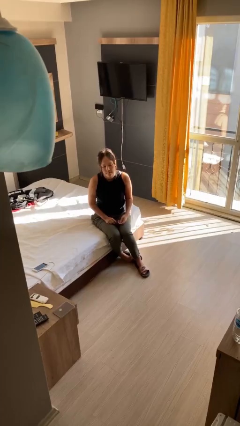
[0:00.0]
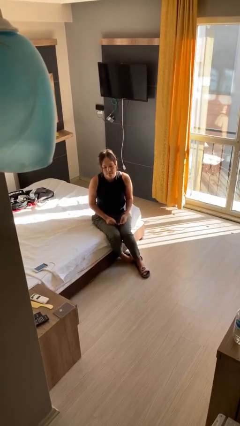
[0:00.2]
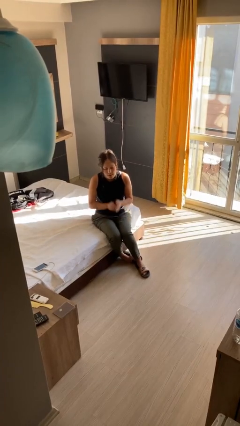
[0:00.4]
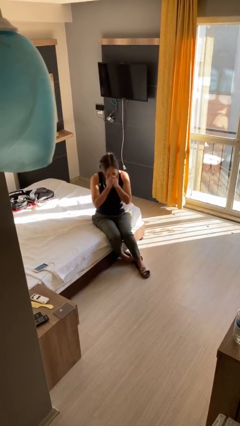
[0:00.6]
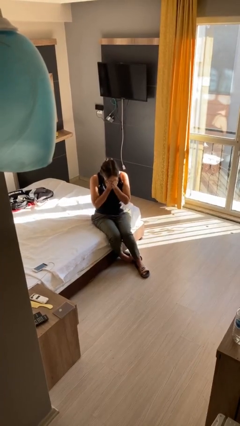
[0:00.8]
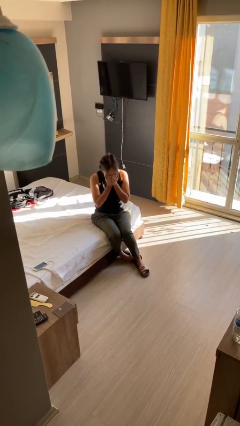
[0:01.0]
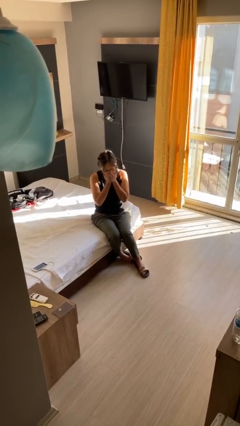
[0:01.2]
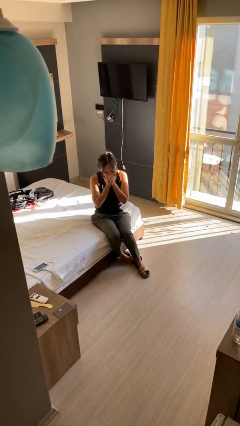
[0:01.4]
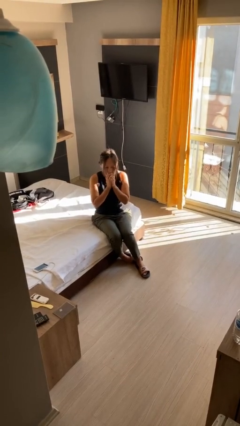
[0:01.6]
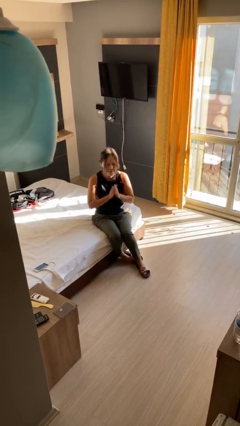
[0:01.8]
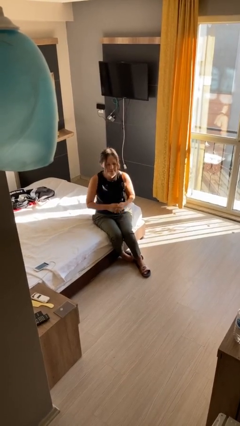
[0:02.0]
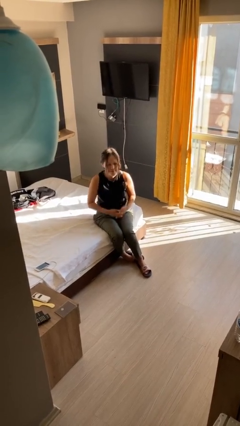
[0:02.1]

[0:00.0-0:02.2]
person sneezes into hand

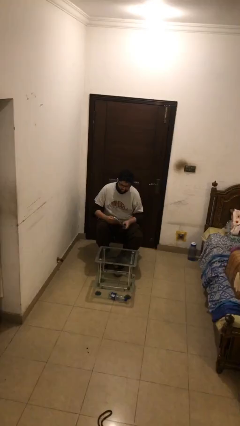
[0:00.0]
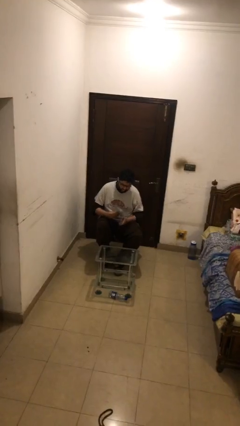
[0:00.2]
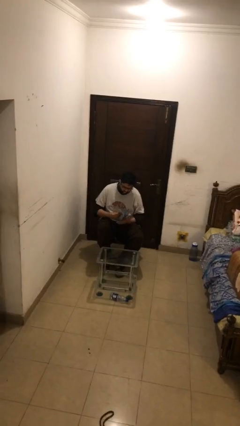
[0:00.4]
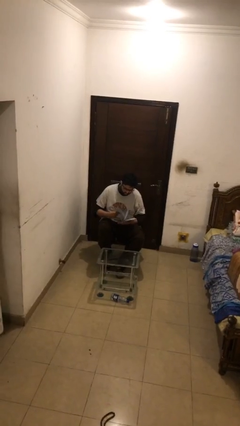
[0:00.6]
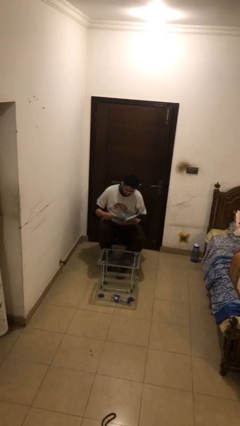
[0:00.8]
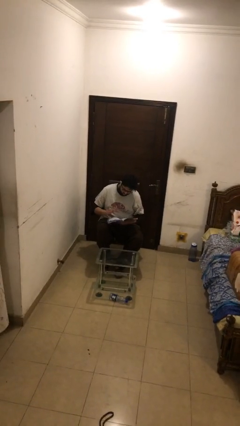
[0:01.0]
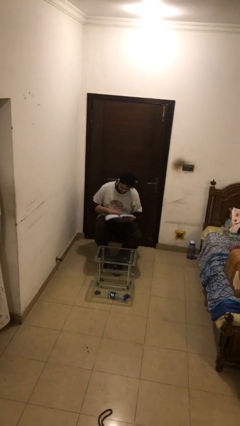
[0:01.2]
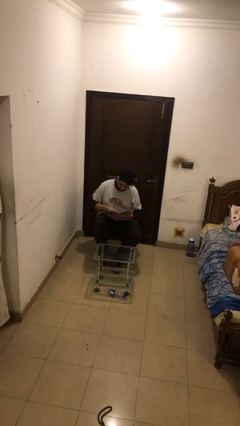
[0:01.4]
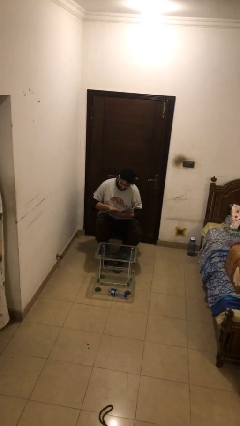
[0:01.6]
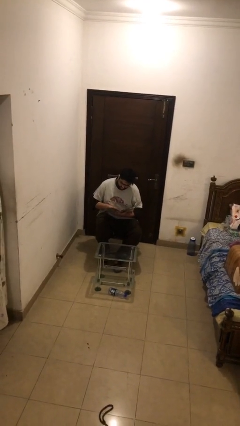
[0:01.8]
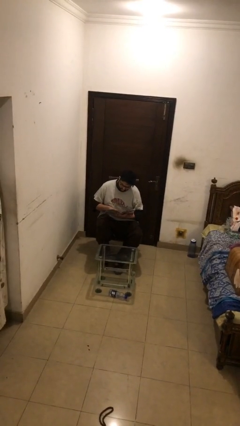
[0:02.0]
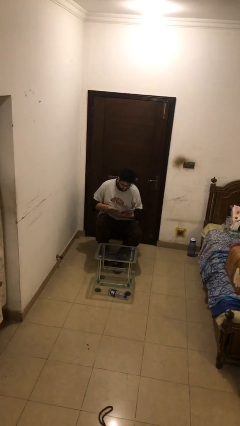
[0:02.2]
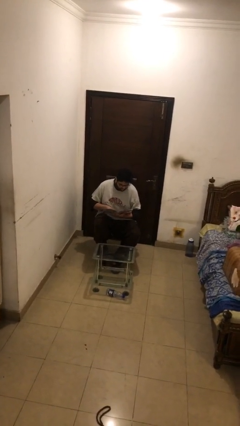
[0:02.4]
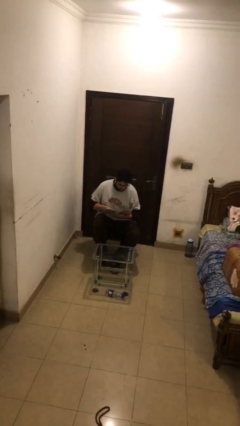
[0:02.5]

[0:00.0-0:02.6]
person reads document

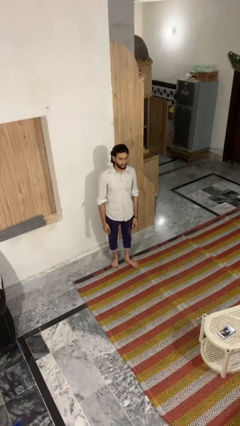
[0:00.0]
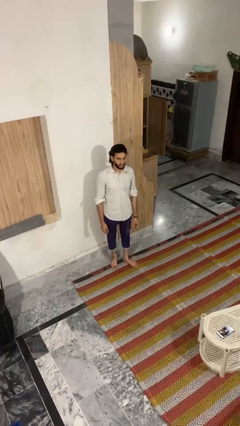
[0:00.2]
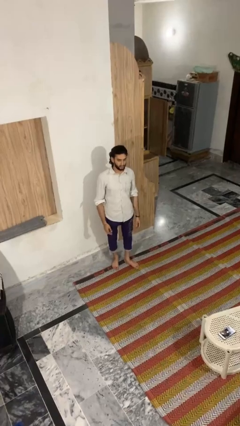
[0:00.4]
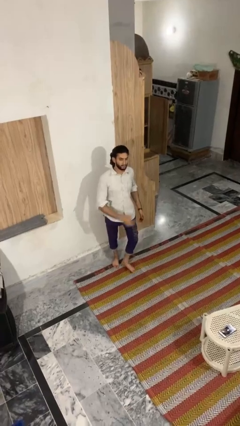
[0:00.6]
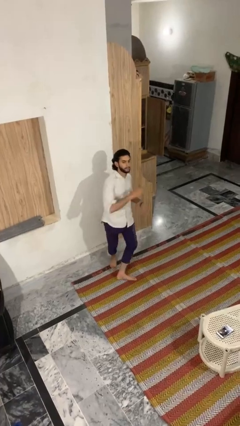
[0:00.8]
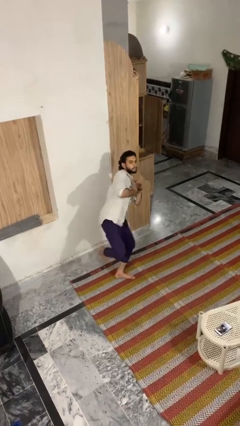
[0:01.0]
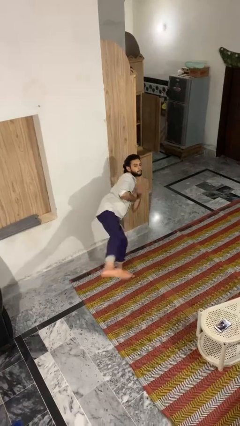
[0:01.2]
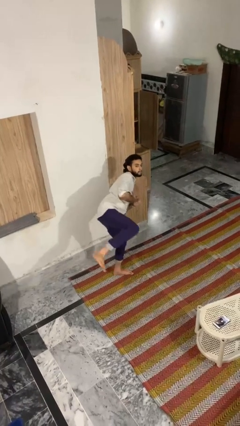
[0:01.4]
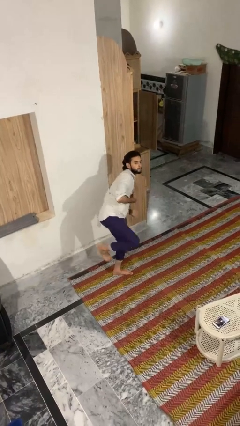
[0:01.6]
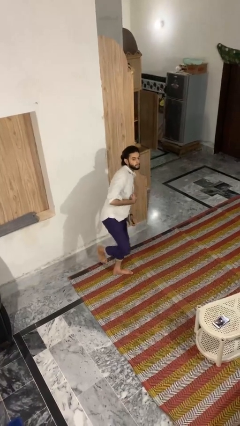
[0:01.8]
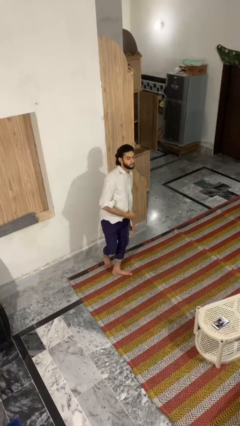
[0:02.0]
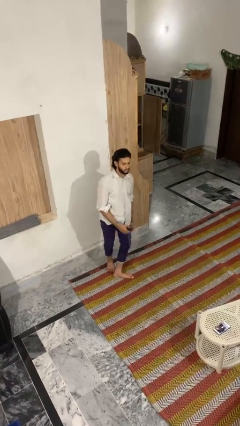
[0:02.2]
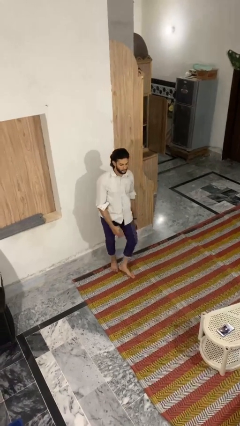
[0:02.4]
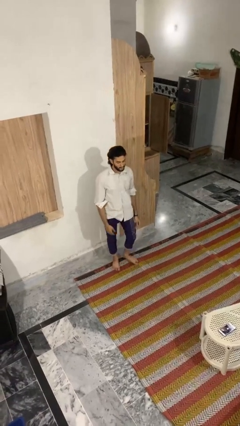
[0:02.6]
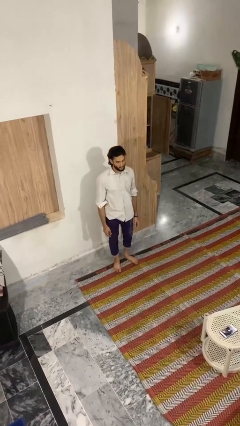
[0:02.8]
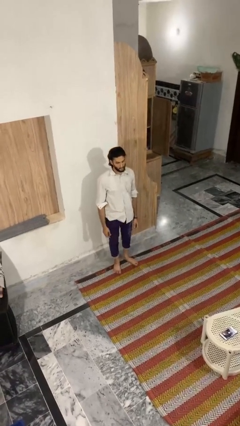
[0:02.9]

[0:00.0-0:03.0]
person karate kicks

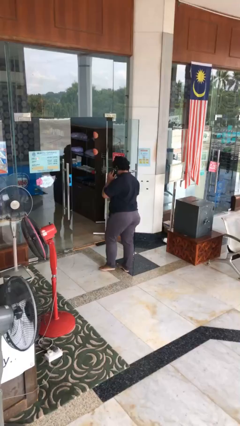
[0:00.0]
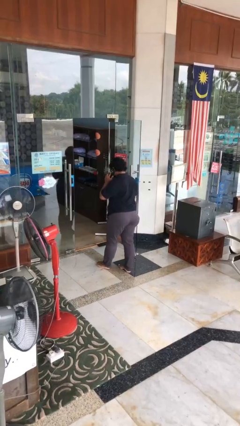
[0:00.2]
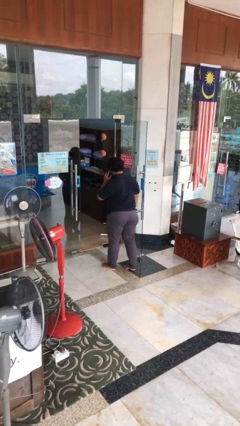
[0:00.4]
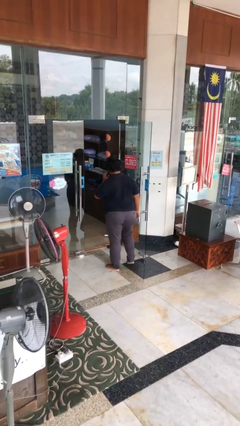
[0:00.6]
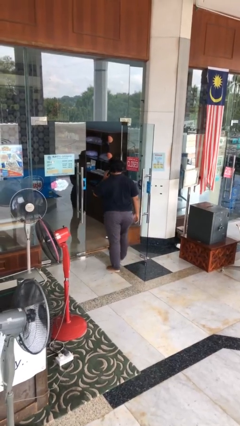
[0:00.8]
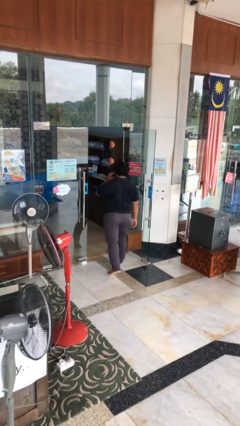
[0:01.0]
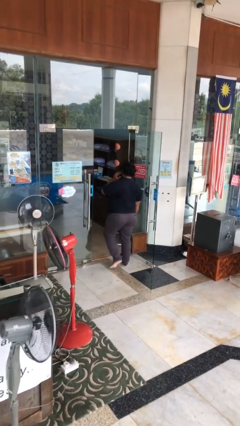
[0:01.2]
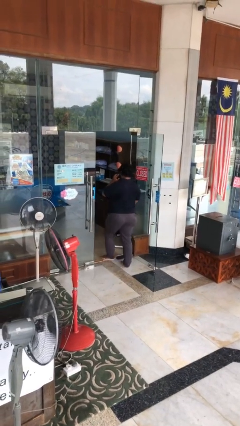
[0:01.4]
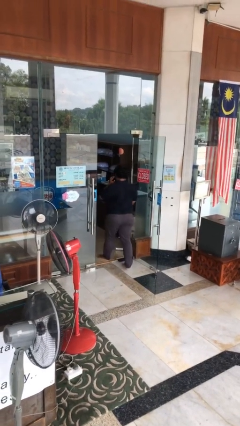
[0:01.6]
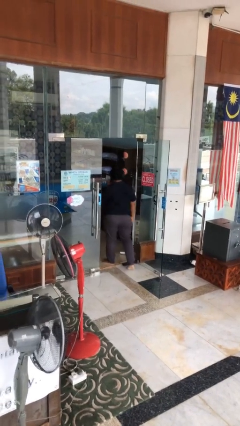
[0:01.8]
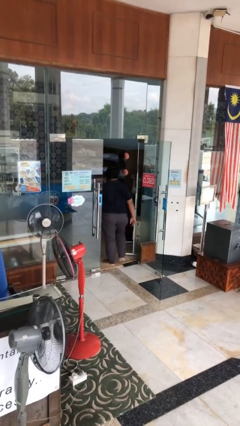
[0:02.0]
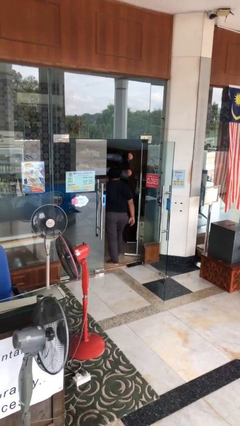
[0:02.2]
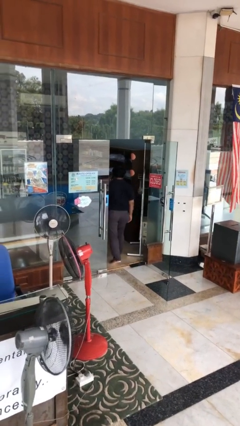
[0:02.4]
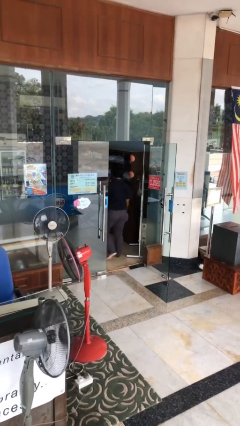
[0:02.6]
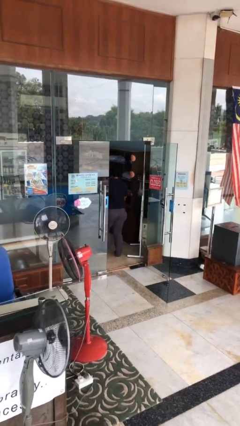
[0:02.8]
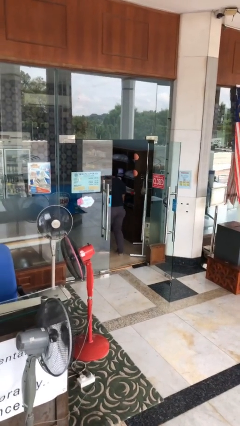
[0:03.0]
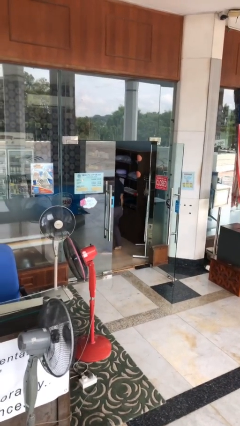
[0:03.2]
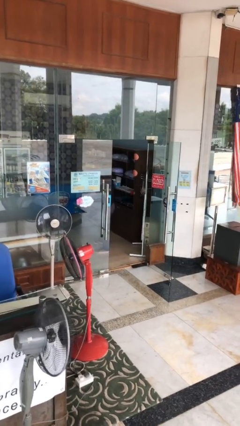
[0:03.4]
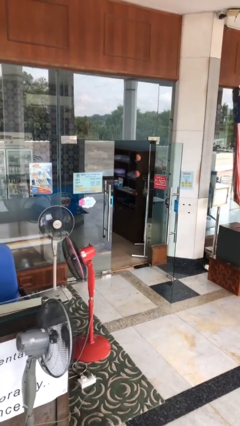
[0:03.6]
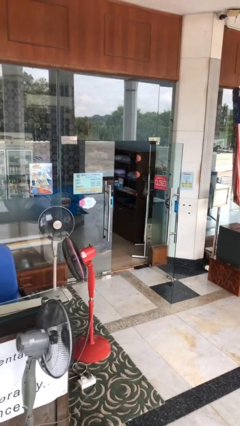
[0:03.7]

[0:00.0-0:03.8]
person exits scene through structure

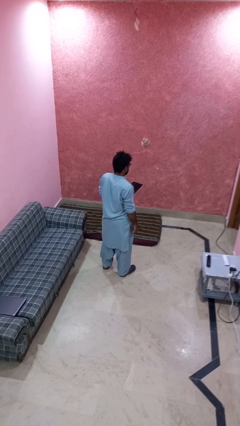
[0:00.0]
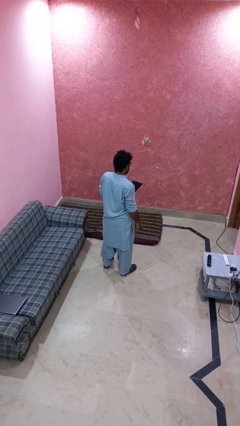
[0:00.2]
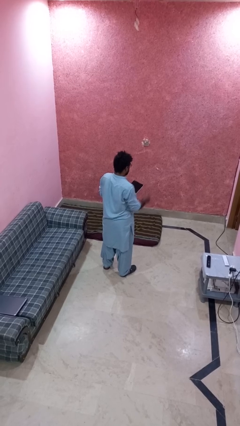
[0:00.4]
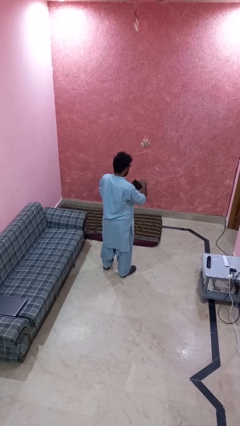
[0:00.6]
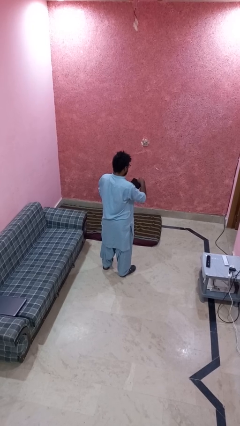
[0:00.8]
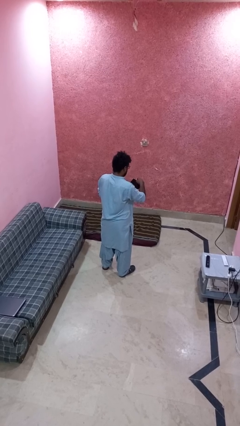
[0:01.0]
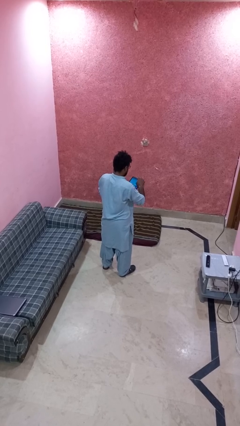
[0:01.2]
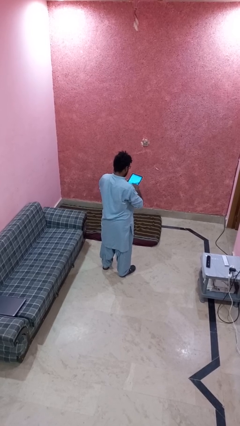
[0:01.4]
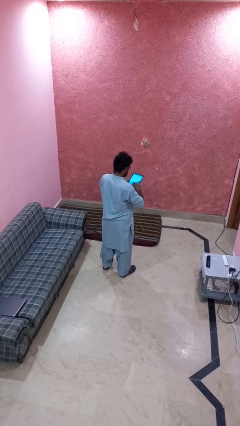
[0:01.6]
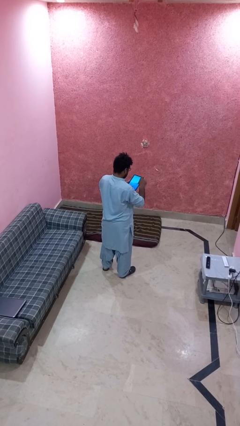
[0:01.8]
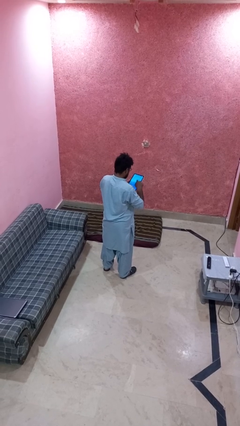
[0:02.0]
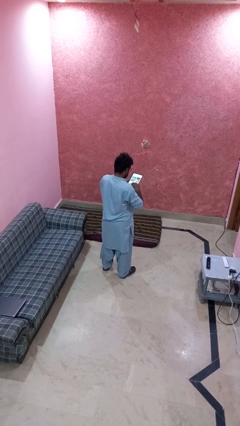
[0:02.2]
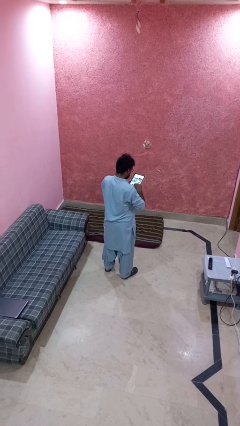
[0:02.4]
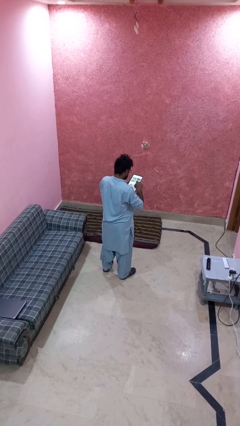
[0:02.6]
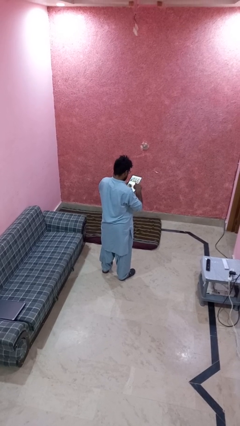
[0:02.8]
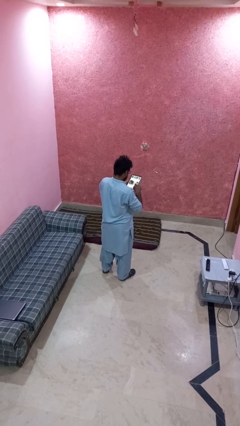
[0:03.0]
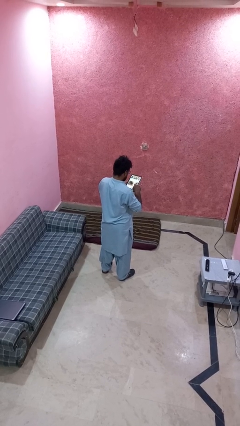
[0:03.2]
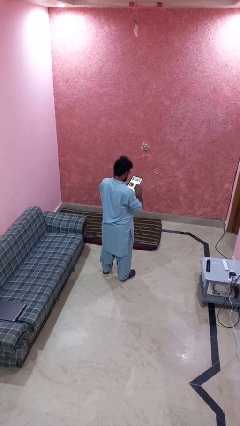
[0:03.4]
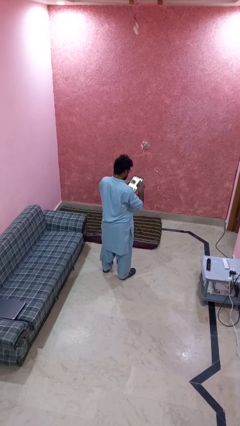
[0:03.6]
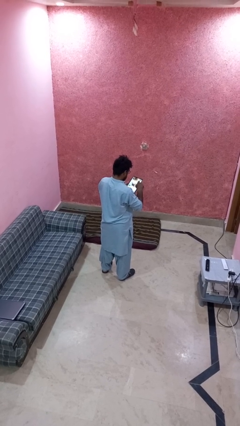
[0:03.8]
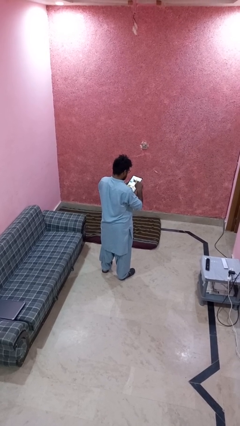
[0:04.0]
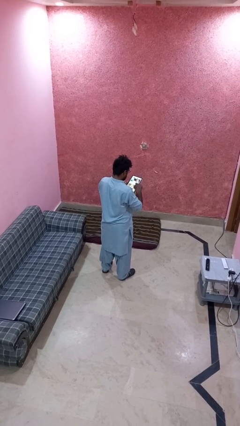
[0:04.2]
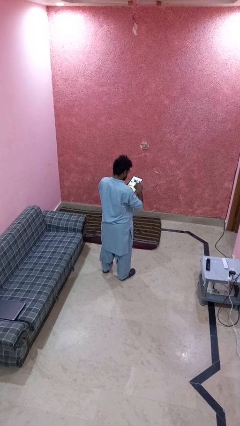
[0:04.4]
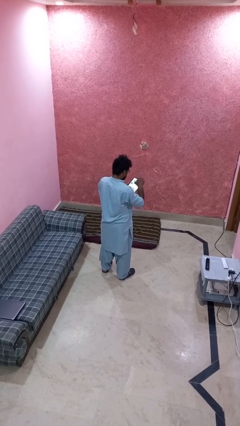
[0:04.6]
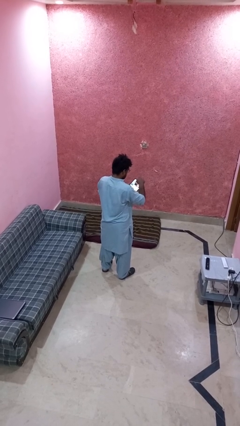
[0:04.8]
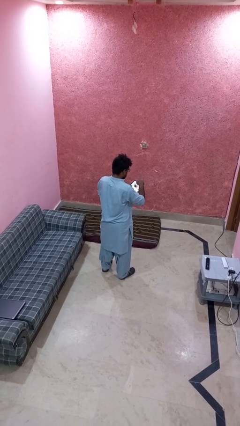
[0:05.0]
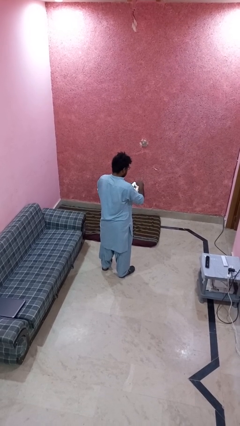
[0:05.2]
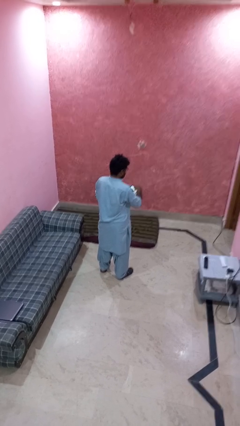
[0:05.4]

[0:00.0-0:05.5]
person interacts with tablet

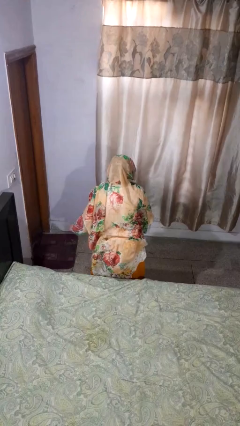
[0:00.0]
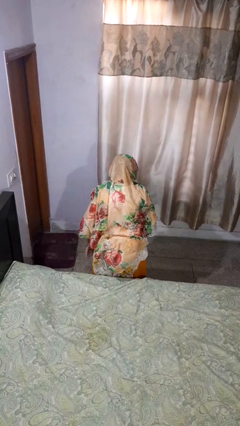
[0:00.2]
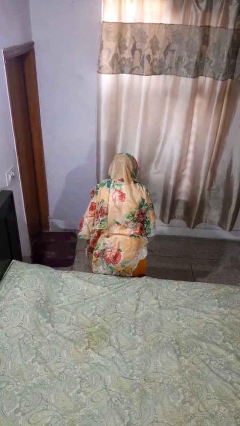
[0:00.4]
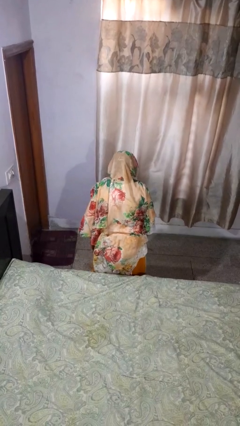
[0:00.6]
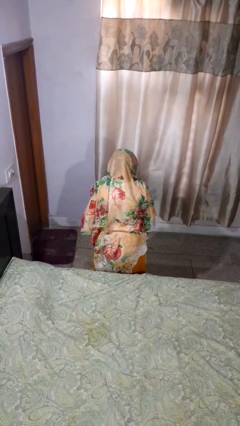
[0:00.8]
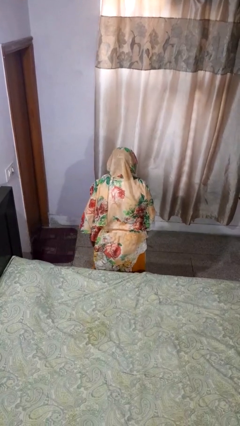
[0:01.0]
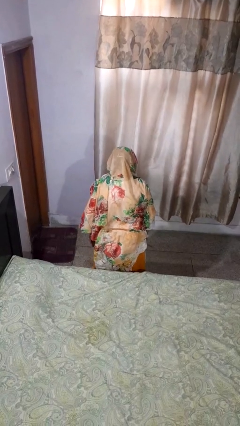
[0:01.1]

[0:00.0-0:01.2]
person picks up object from floor
